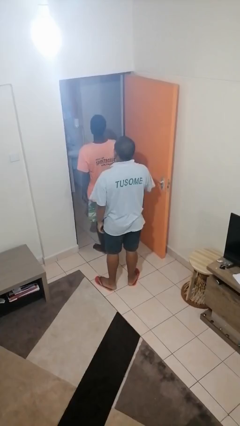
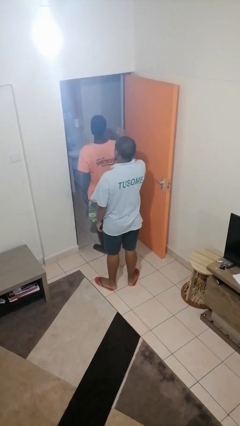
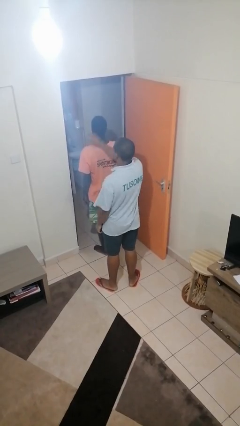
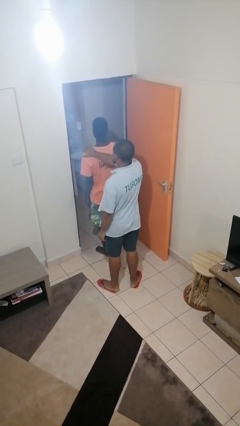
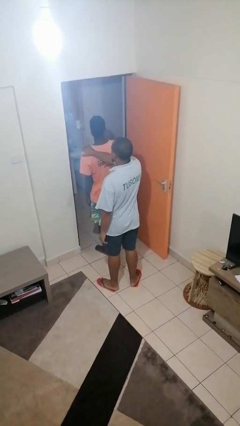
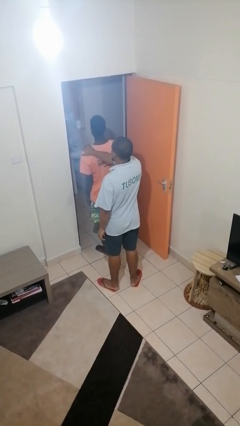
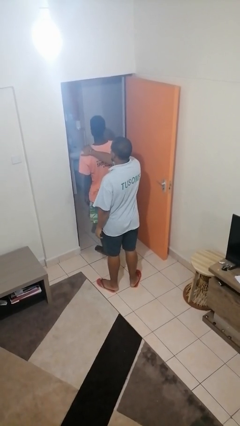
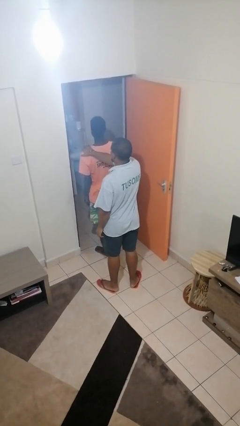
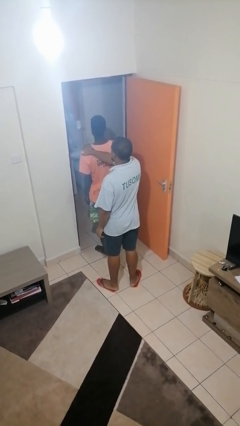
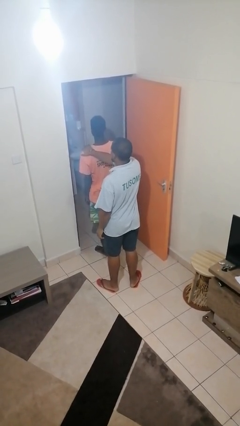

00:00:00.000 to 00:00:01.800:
person grabs person by shoulder

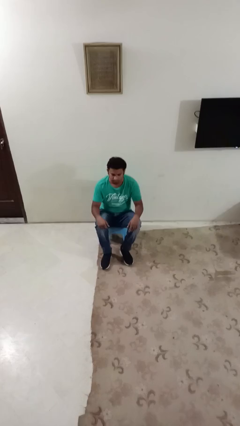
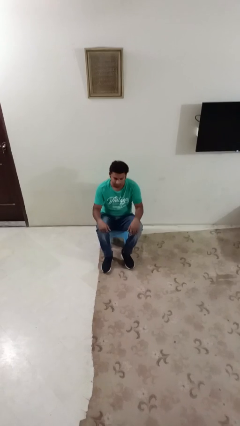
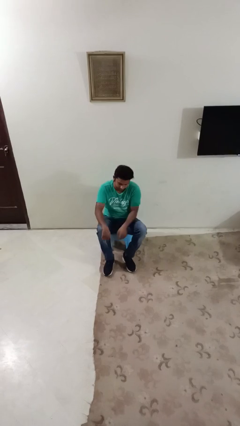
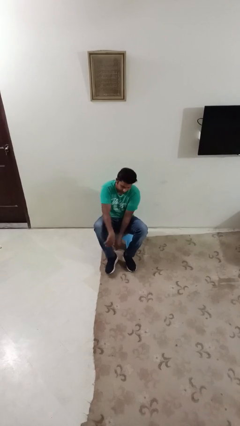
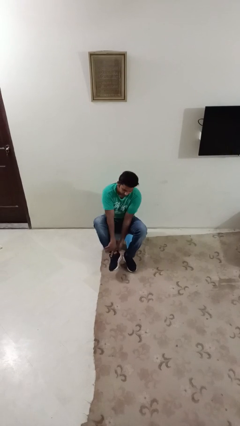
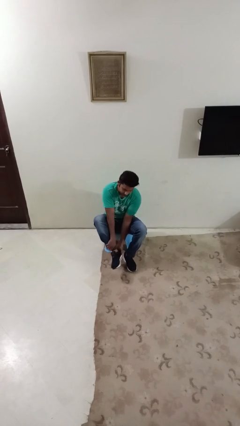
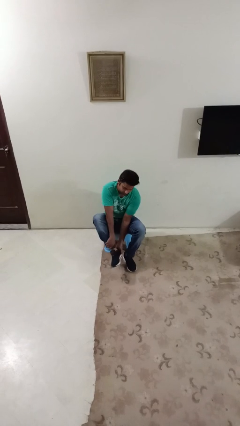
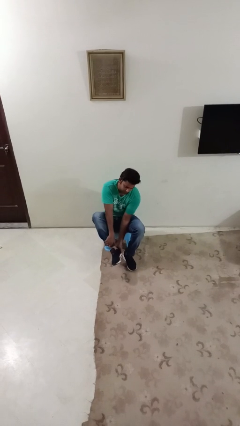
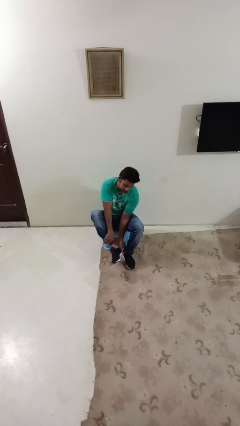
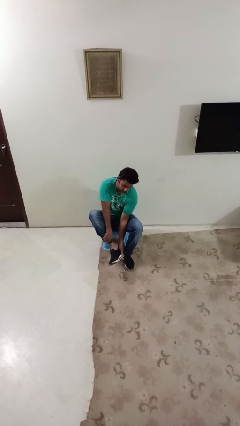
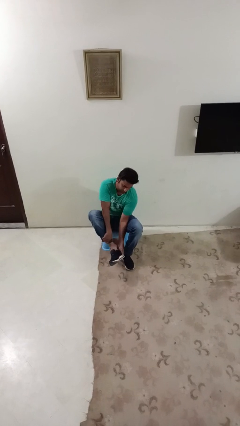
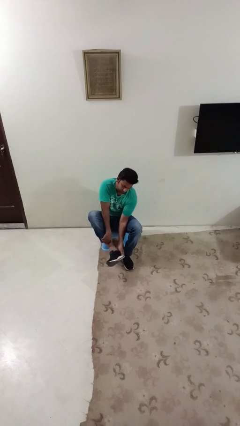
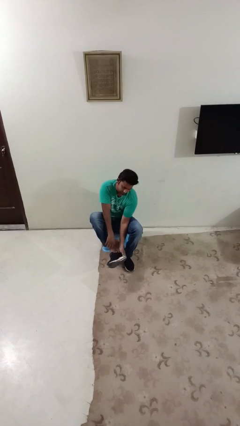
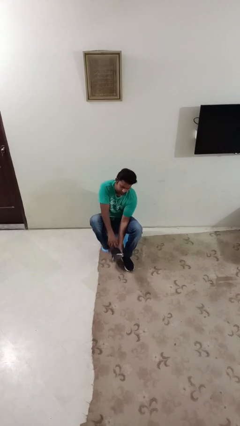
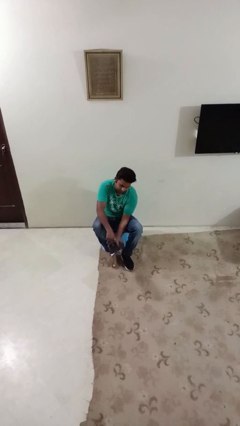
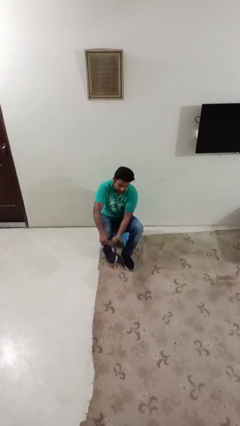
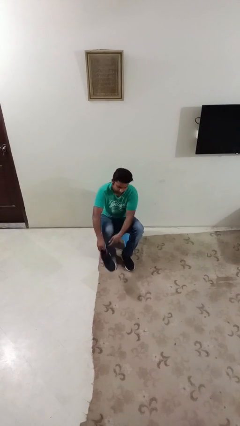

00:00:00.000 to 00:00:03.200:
person takes off shoes

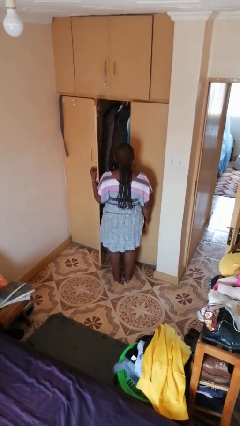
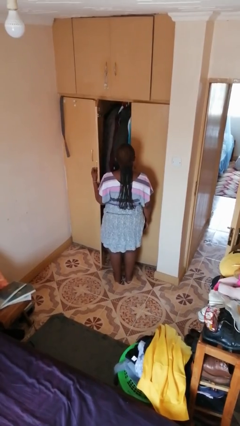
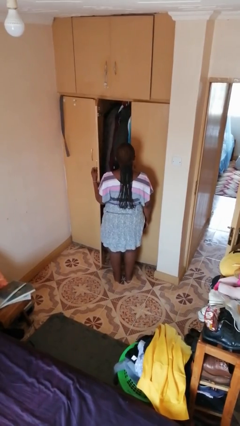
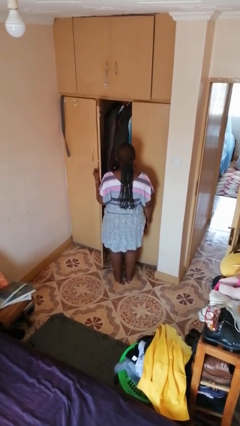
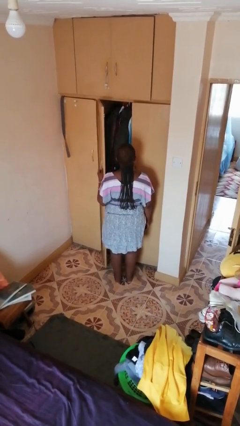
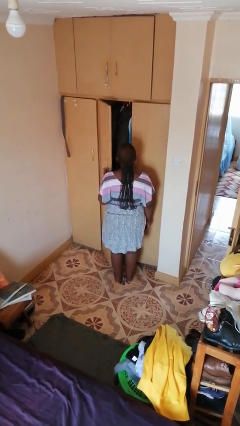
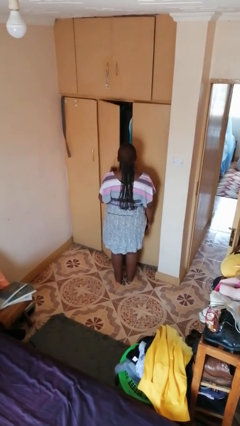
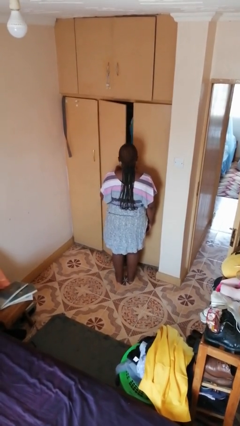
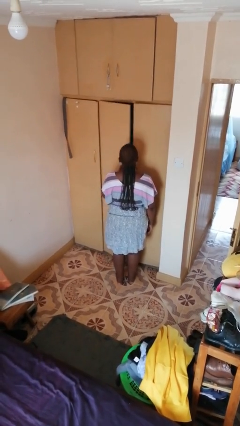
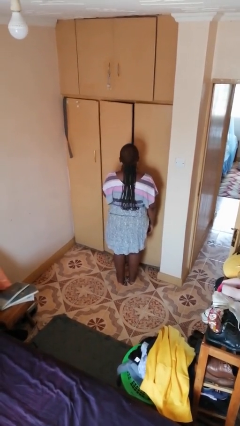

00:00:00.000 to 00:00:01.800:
person closes closet door

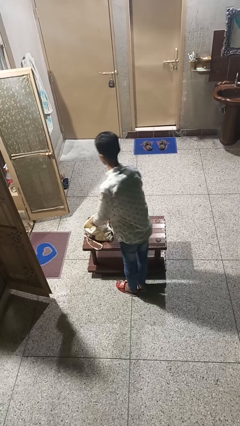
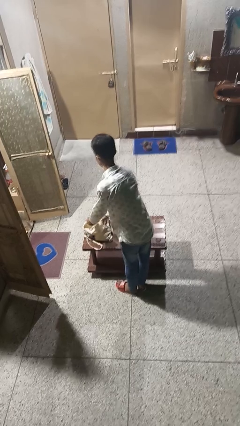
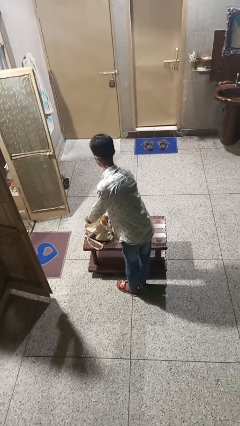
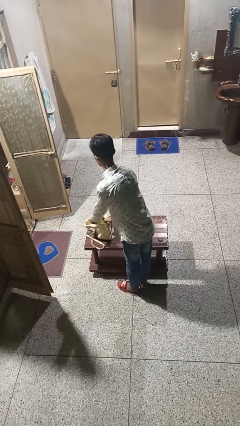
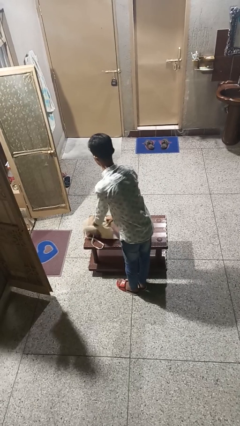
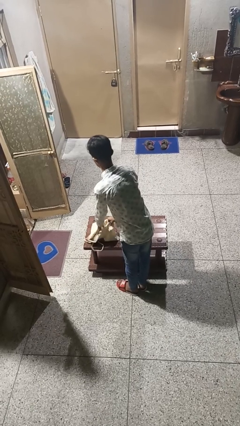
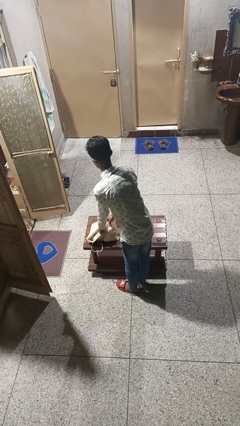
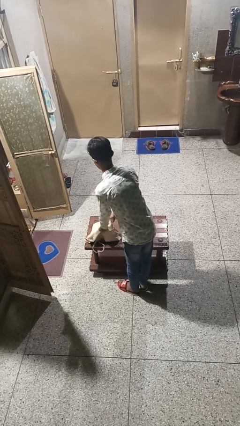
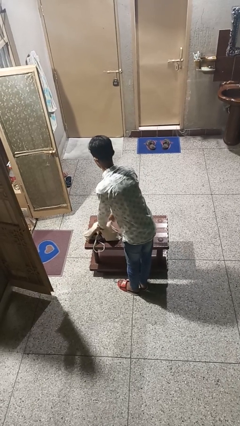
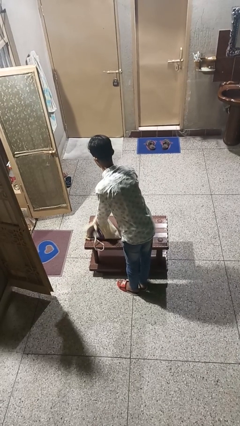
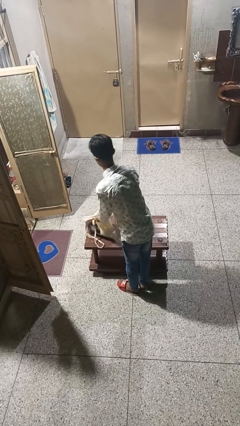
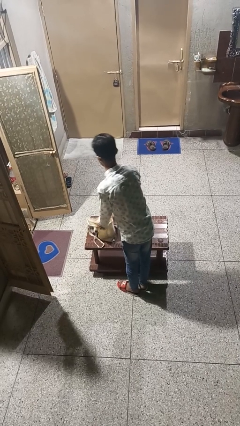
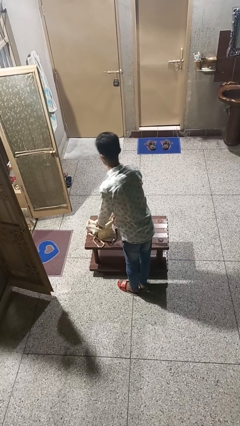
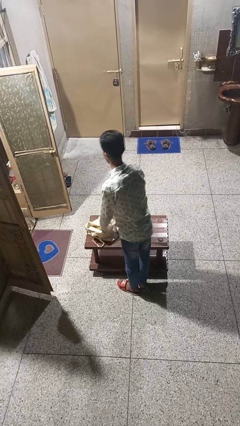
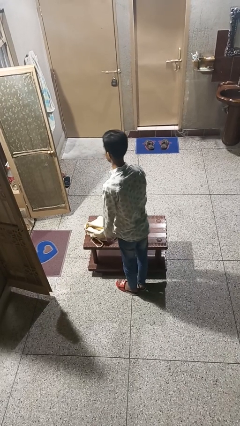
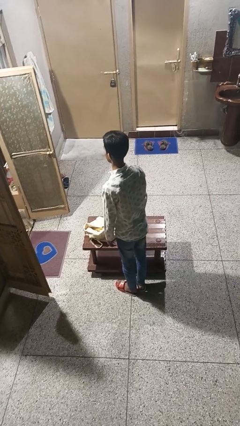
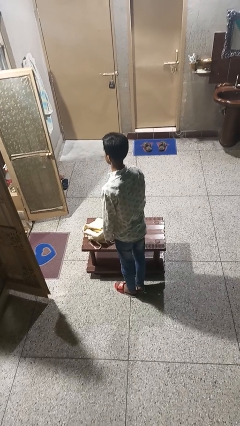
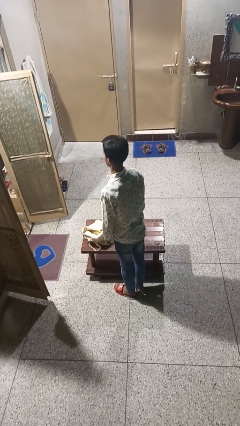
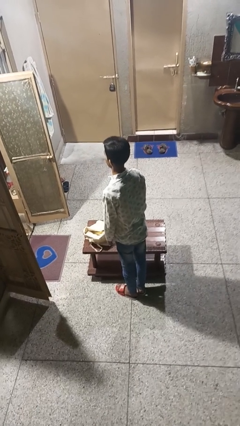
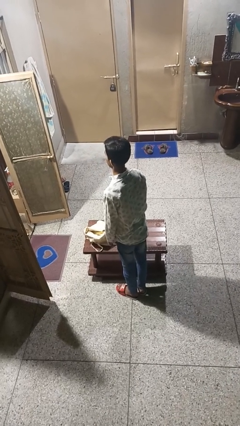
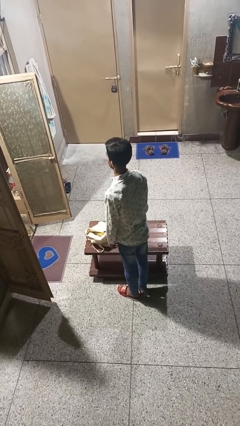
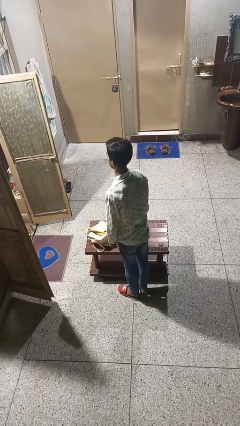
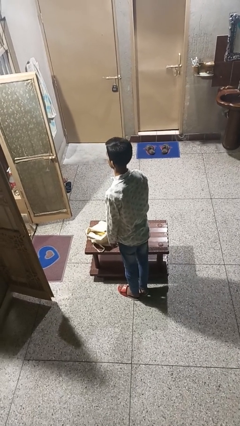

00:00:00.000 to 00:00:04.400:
person puts object into bag

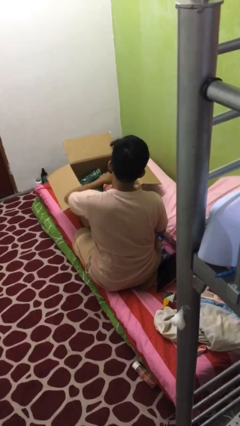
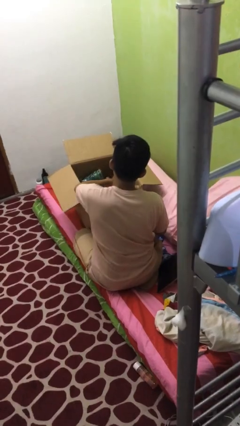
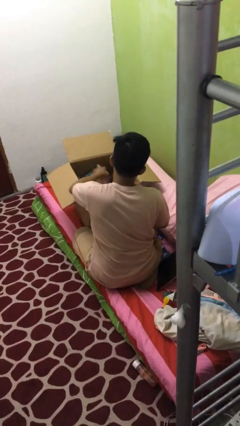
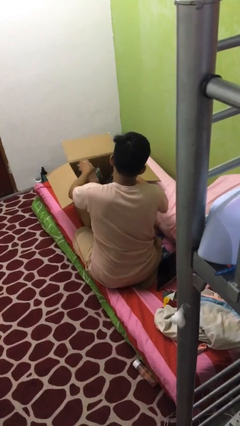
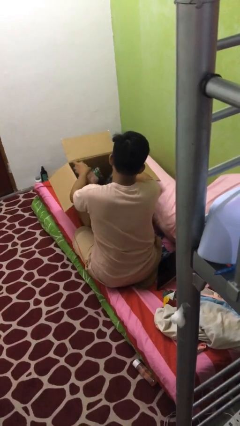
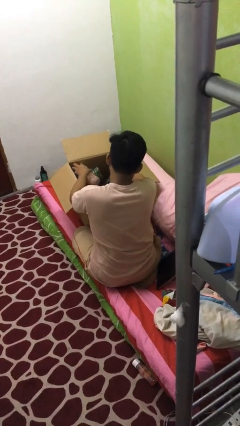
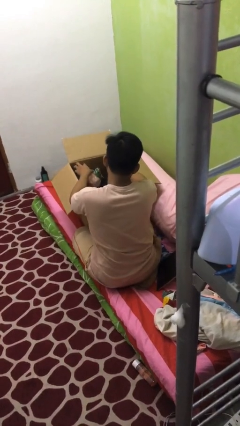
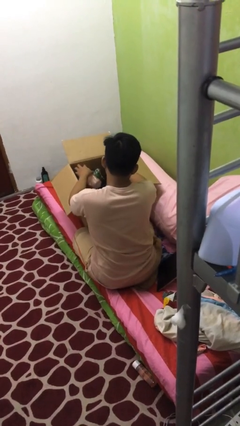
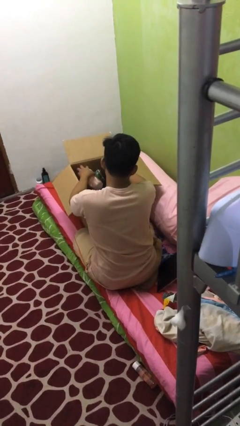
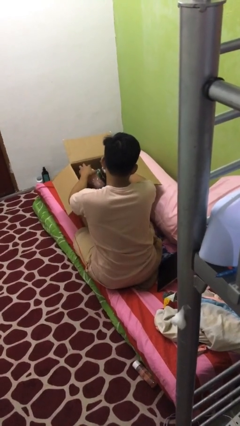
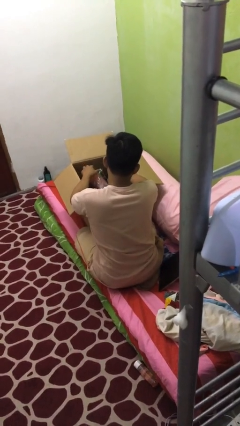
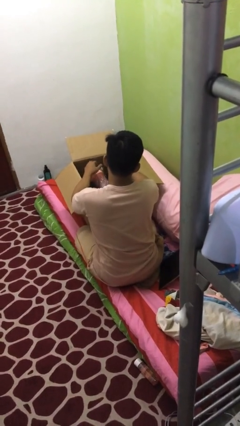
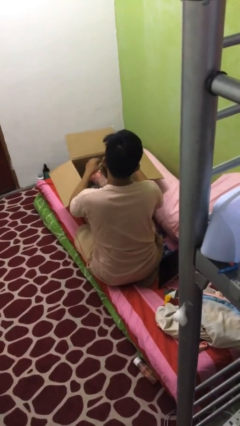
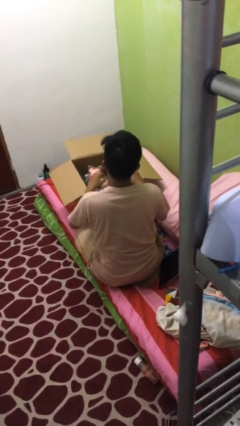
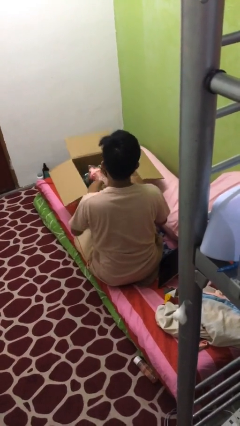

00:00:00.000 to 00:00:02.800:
person searches in box

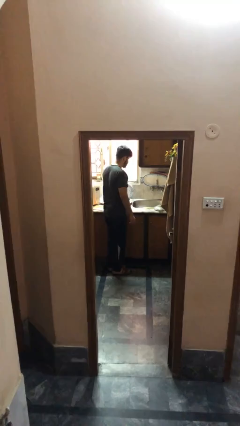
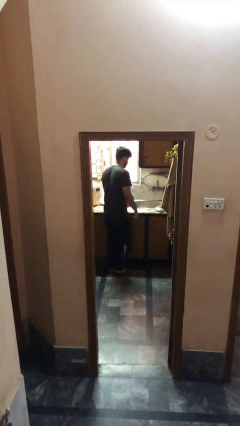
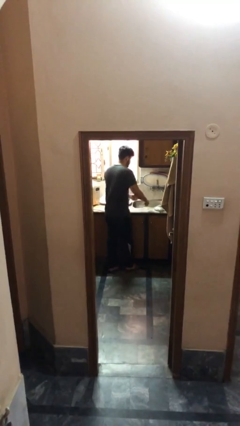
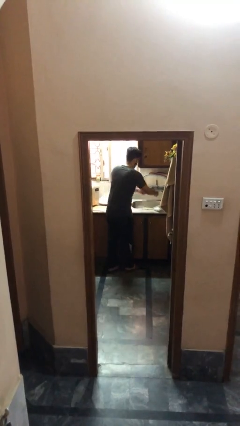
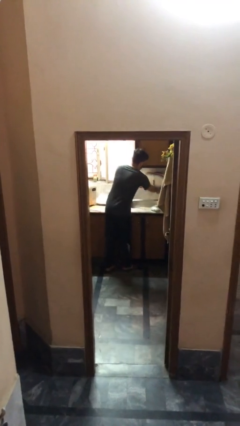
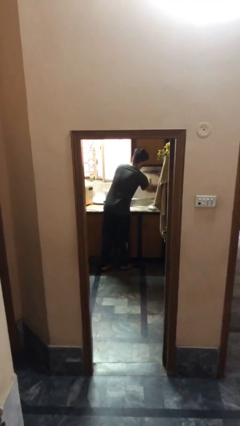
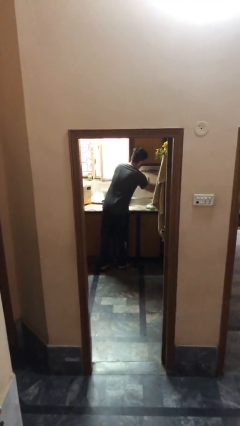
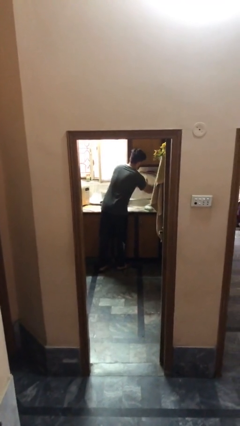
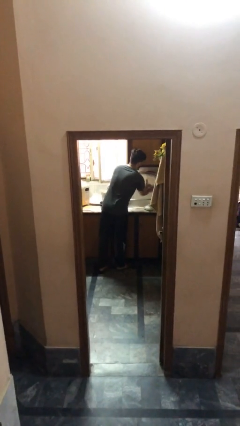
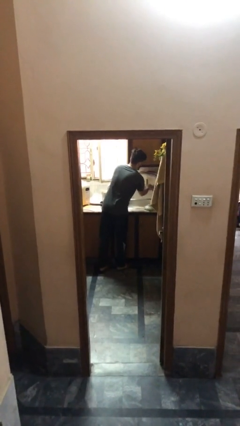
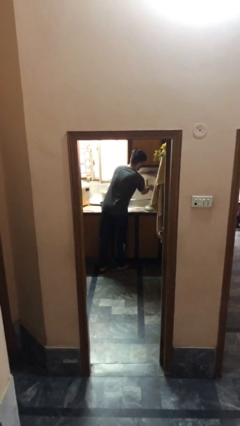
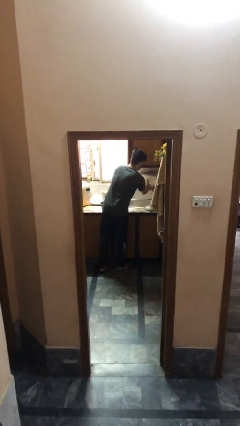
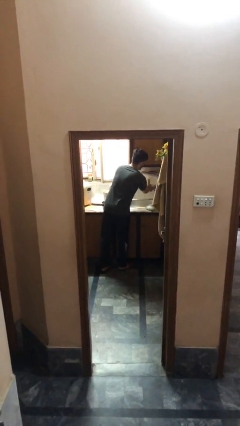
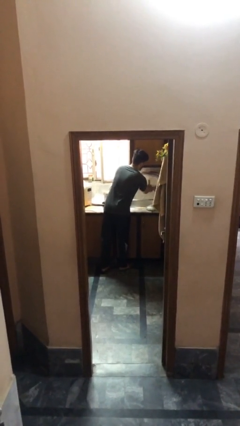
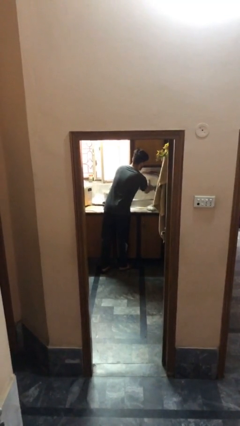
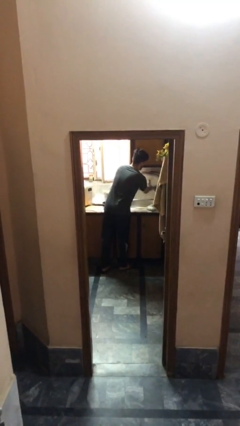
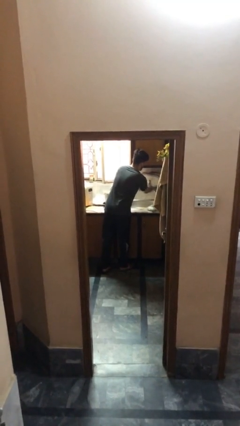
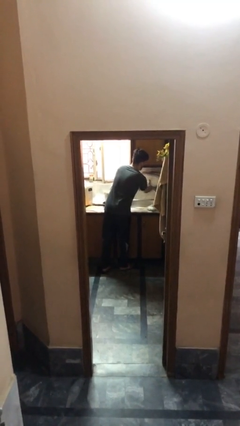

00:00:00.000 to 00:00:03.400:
person washes hands
